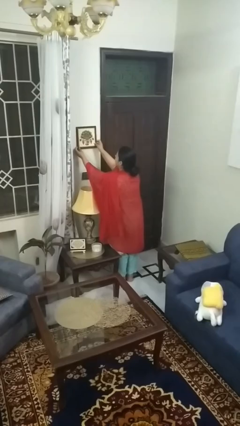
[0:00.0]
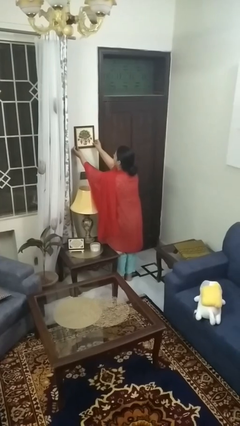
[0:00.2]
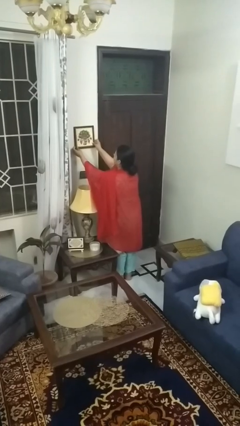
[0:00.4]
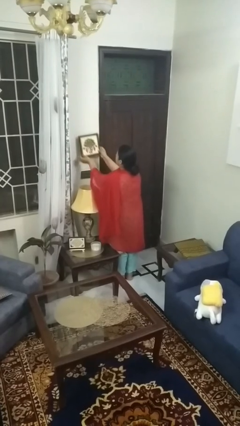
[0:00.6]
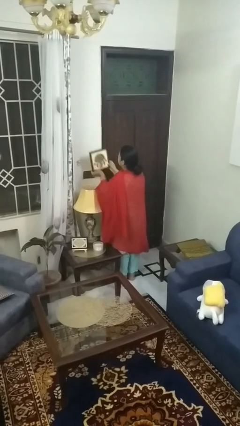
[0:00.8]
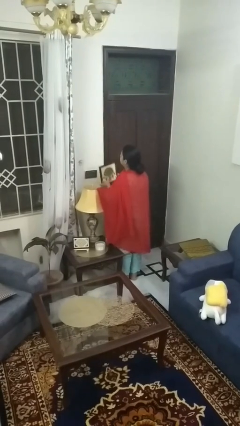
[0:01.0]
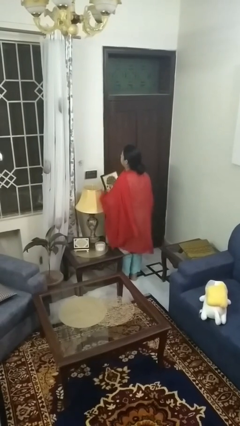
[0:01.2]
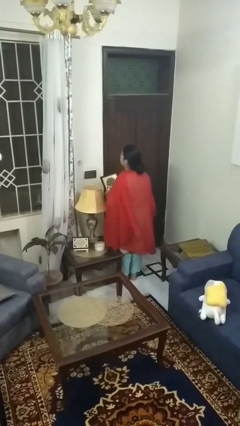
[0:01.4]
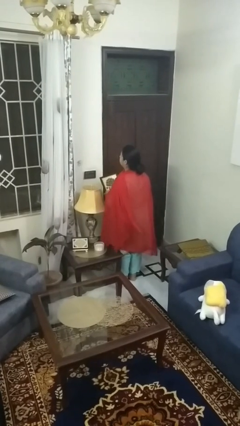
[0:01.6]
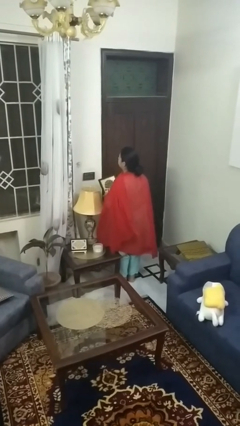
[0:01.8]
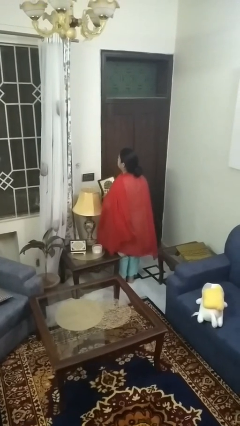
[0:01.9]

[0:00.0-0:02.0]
person takes down picture frame

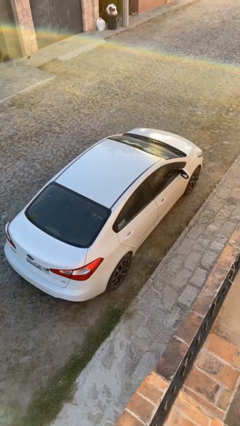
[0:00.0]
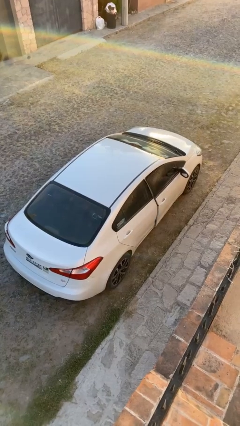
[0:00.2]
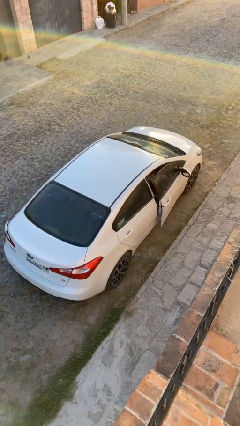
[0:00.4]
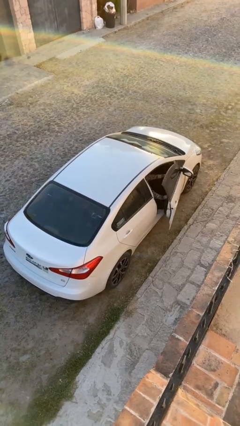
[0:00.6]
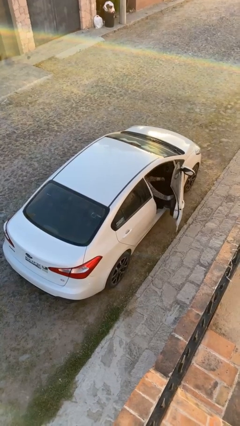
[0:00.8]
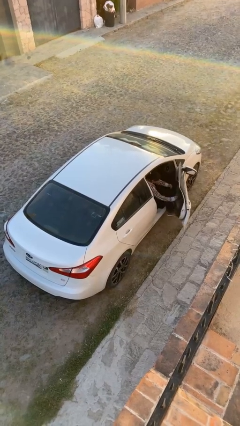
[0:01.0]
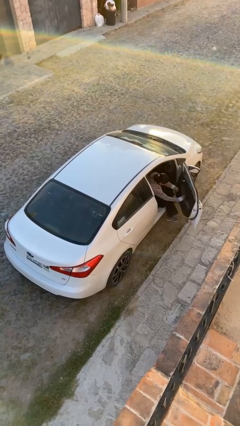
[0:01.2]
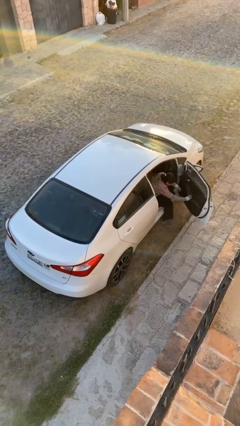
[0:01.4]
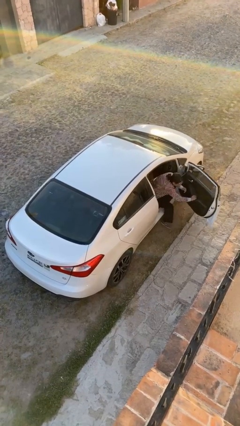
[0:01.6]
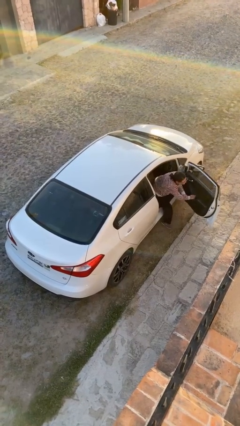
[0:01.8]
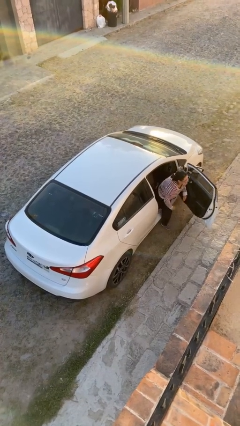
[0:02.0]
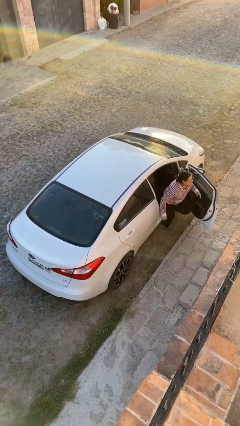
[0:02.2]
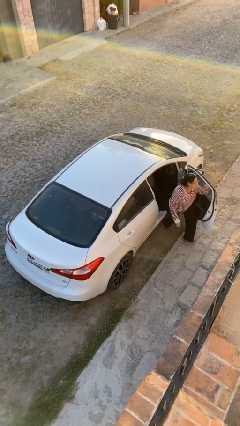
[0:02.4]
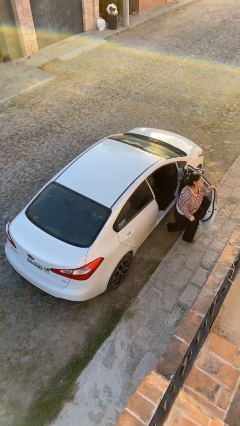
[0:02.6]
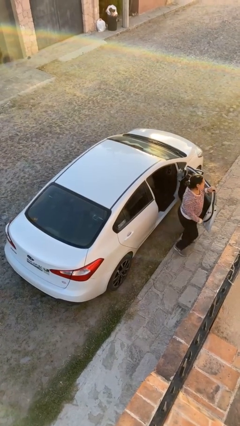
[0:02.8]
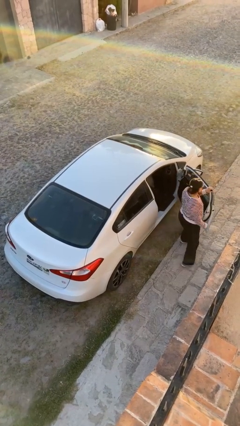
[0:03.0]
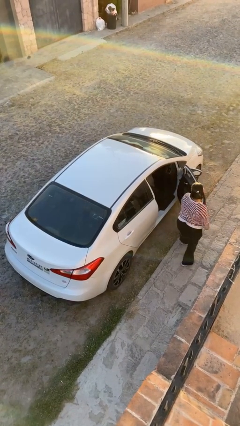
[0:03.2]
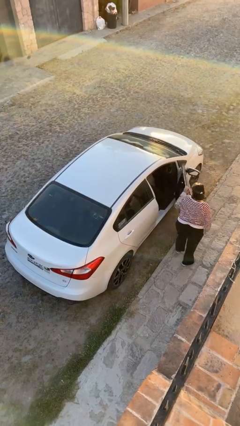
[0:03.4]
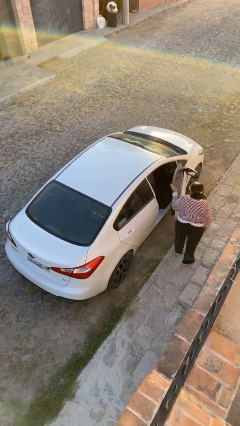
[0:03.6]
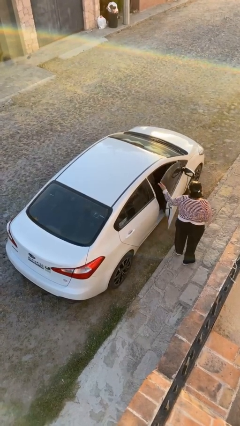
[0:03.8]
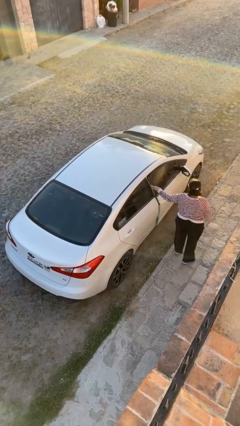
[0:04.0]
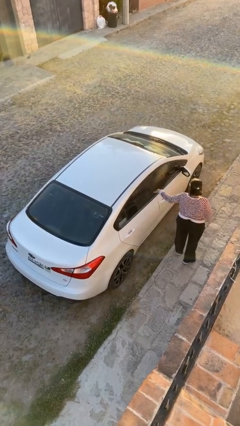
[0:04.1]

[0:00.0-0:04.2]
car drops off person

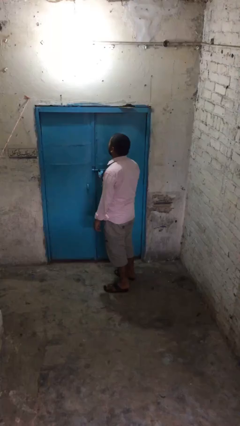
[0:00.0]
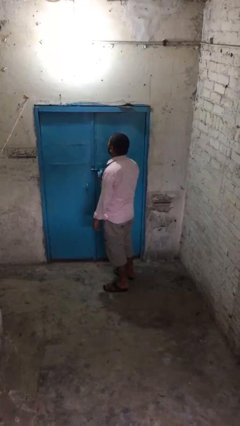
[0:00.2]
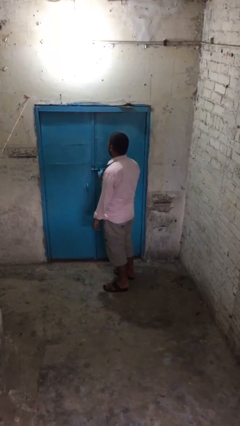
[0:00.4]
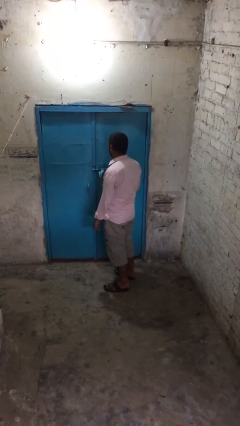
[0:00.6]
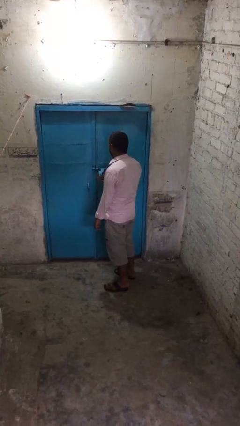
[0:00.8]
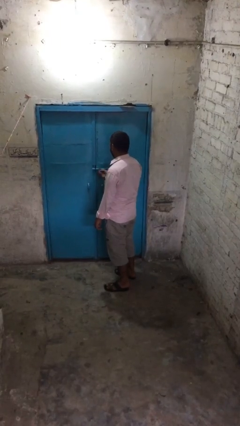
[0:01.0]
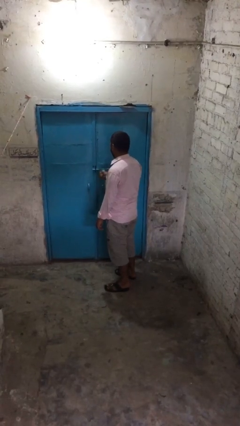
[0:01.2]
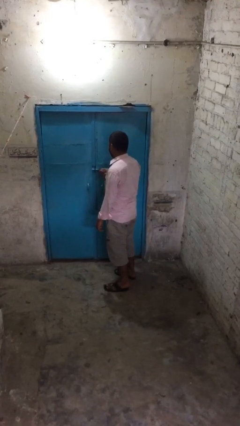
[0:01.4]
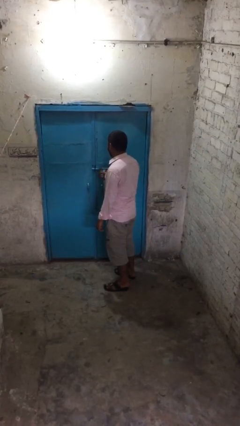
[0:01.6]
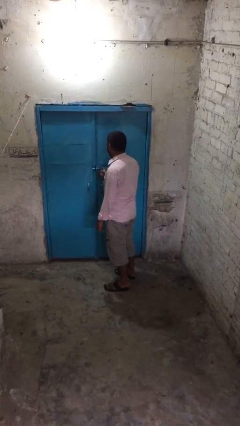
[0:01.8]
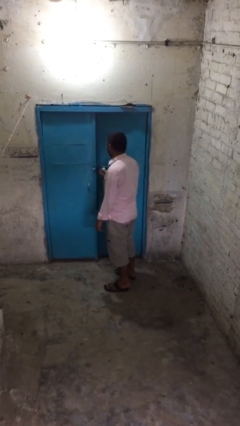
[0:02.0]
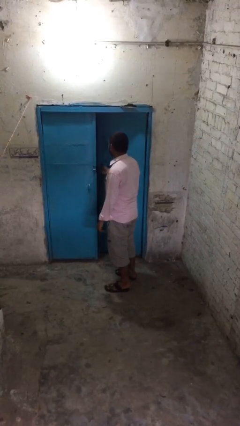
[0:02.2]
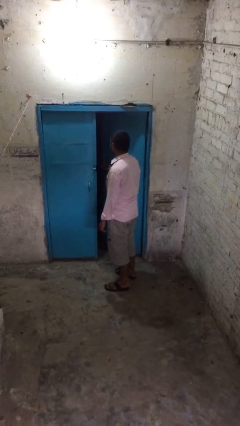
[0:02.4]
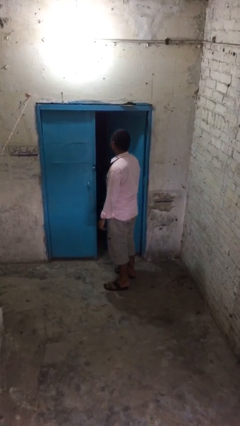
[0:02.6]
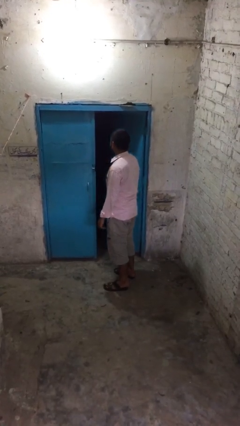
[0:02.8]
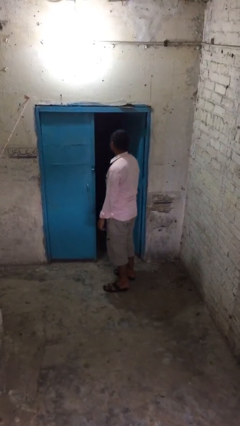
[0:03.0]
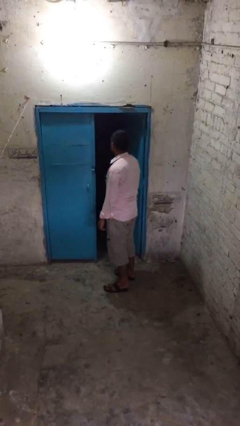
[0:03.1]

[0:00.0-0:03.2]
person opens facility door

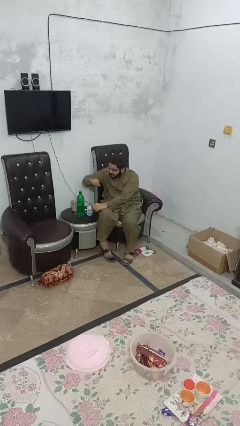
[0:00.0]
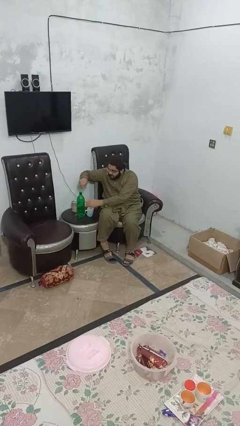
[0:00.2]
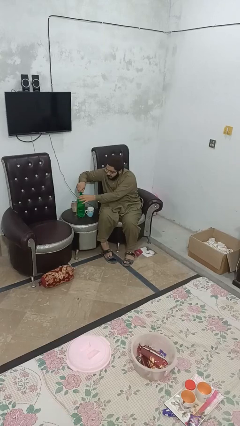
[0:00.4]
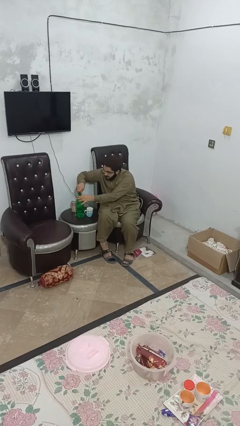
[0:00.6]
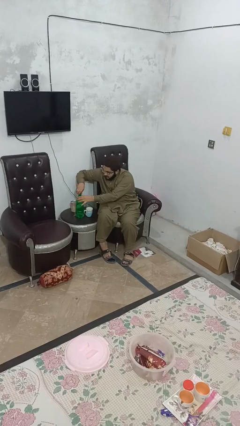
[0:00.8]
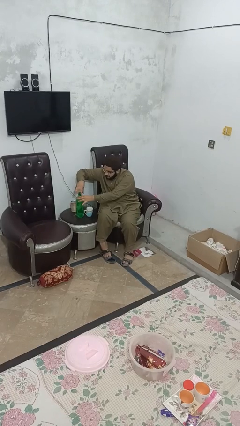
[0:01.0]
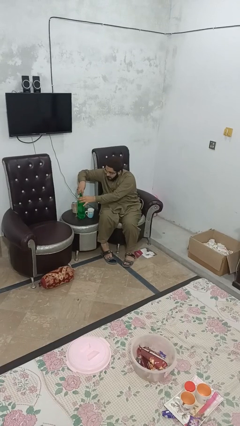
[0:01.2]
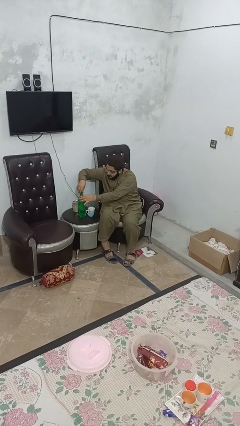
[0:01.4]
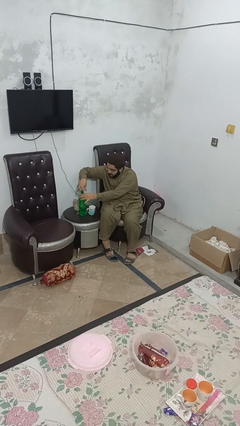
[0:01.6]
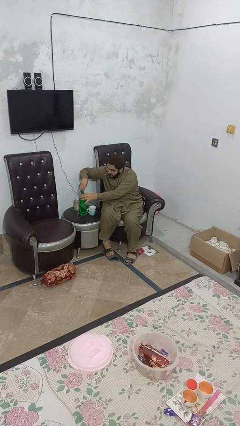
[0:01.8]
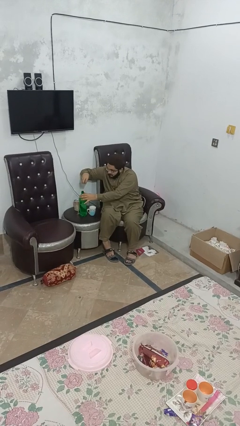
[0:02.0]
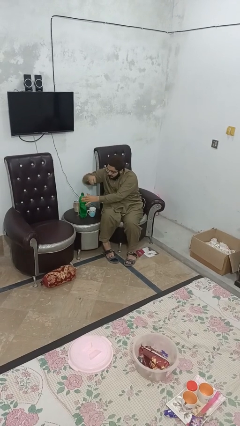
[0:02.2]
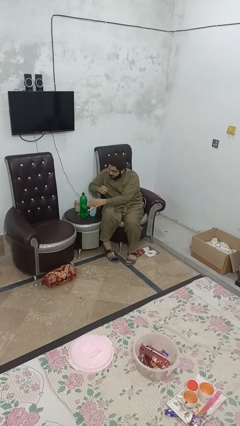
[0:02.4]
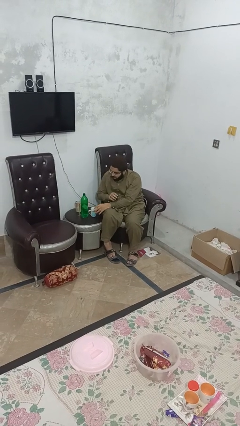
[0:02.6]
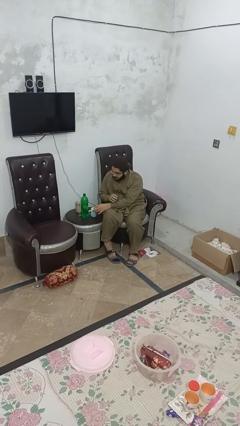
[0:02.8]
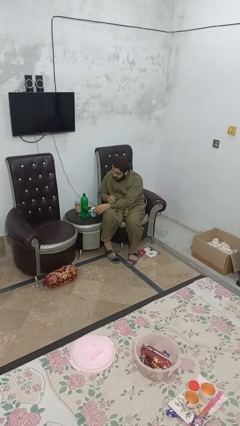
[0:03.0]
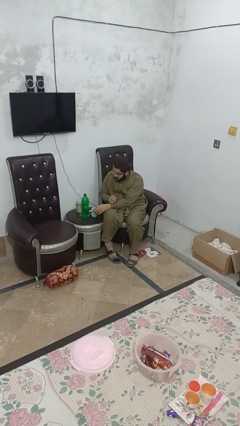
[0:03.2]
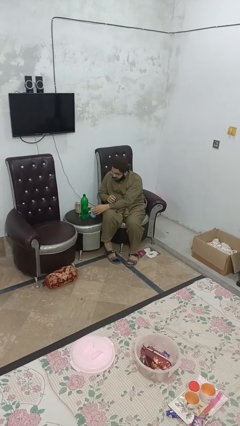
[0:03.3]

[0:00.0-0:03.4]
person unscrews lid from bottle

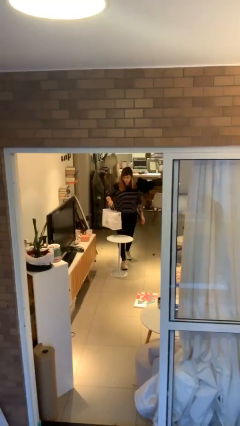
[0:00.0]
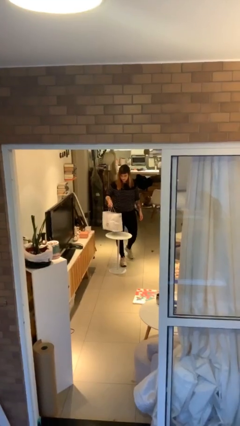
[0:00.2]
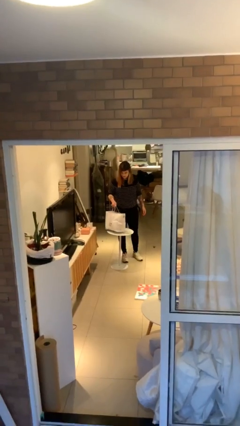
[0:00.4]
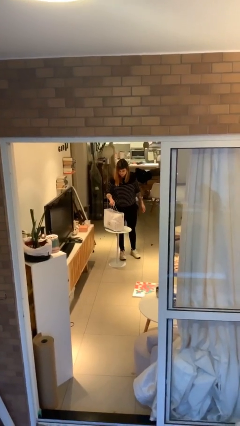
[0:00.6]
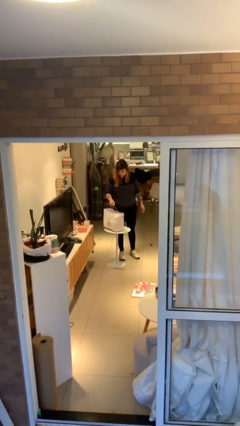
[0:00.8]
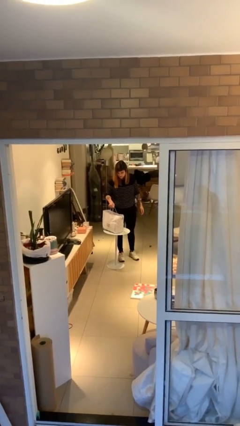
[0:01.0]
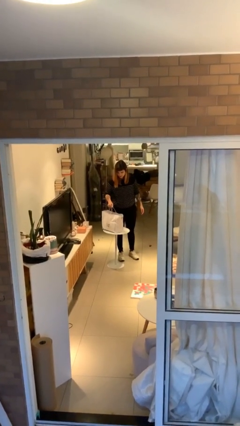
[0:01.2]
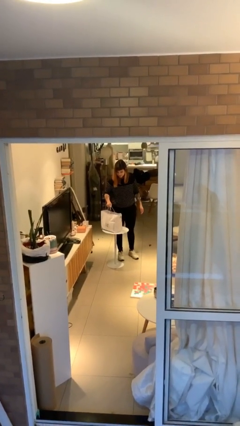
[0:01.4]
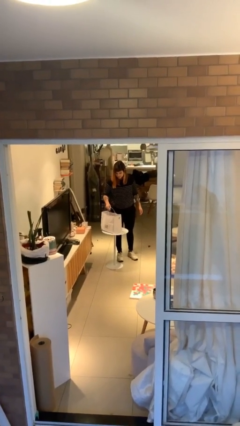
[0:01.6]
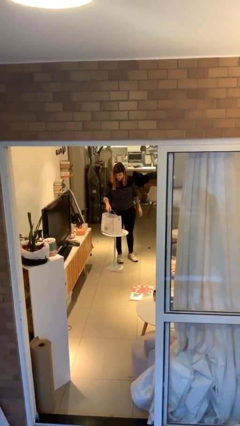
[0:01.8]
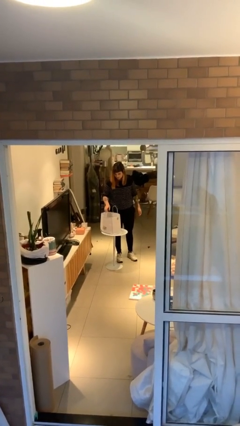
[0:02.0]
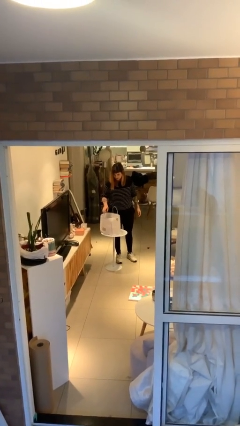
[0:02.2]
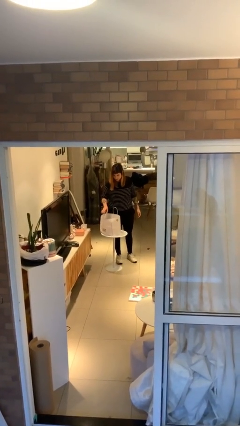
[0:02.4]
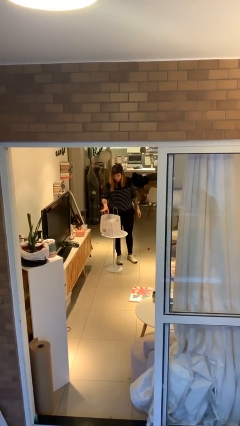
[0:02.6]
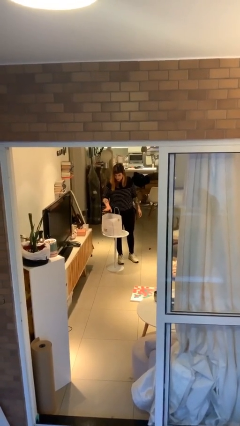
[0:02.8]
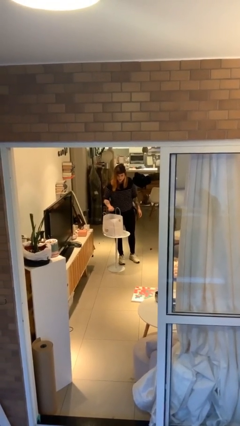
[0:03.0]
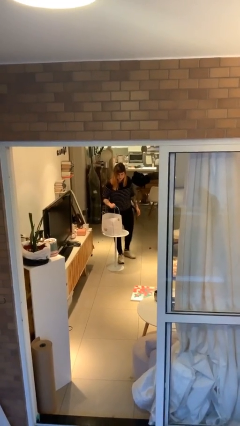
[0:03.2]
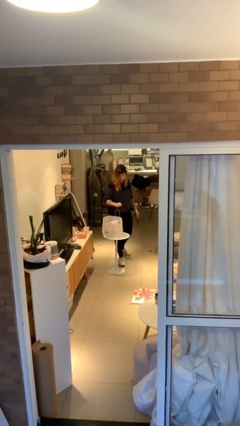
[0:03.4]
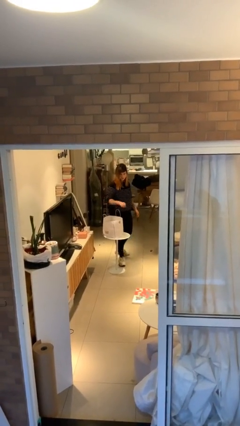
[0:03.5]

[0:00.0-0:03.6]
person puts down object on table

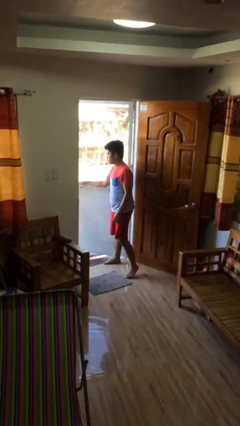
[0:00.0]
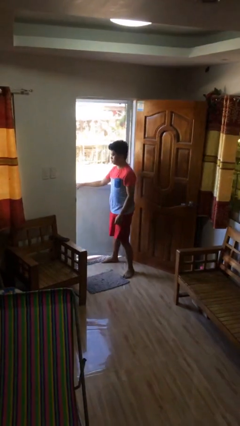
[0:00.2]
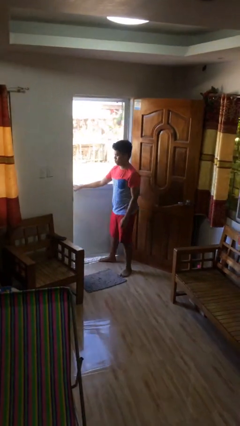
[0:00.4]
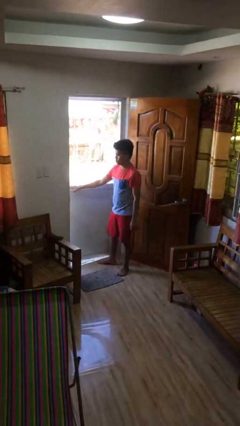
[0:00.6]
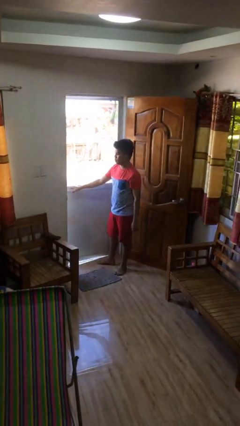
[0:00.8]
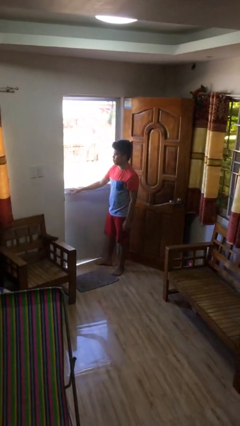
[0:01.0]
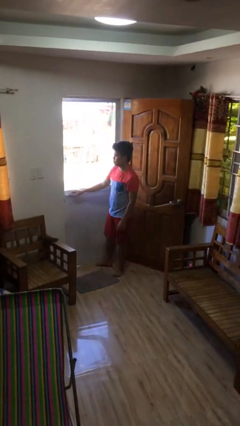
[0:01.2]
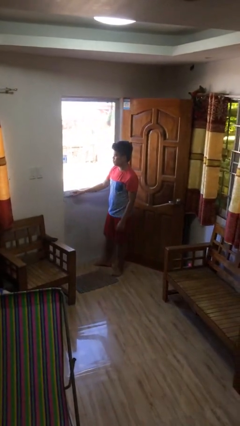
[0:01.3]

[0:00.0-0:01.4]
person closes facility door
